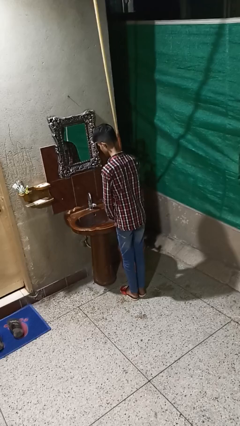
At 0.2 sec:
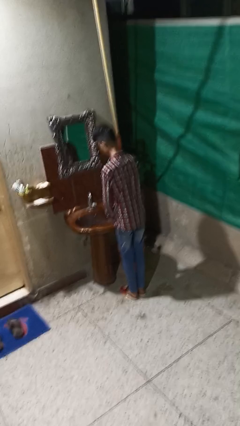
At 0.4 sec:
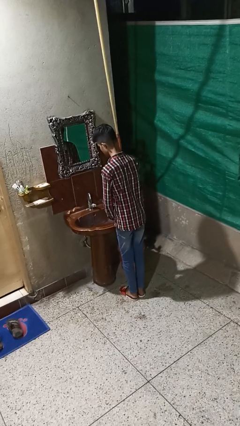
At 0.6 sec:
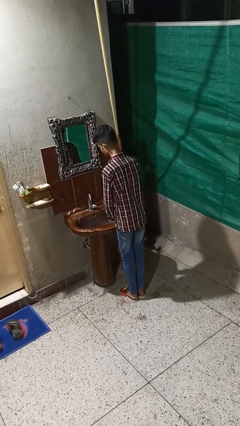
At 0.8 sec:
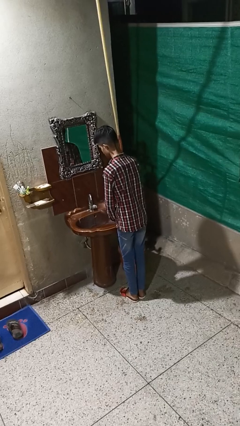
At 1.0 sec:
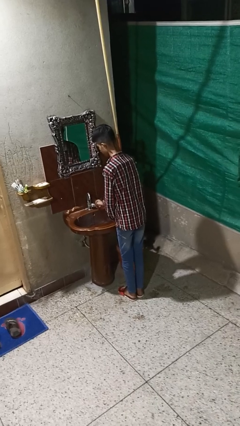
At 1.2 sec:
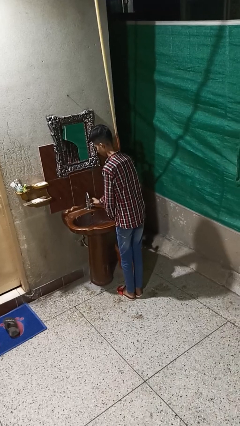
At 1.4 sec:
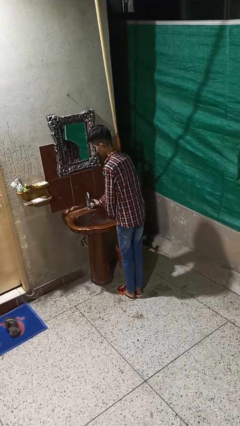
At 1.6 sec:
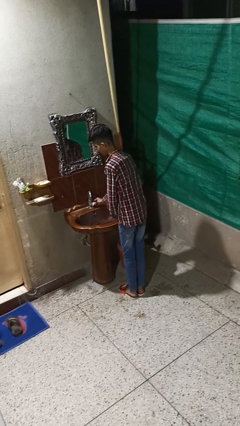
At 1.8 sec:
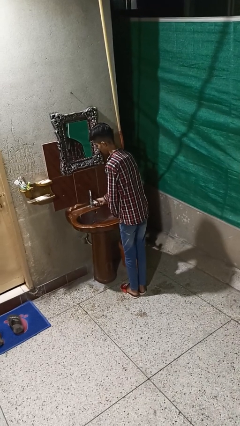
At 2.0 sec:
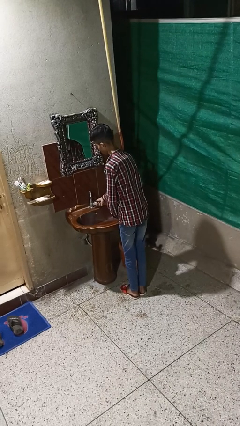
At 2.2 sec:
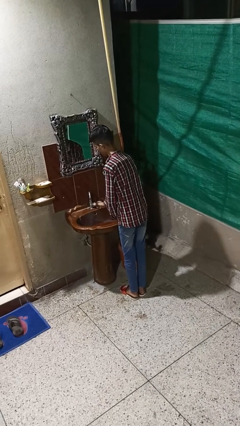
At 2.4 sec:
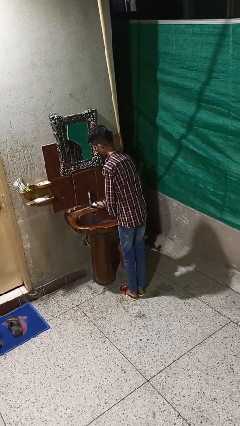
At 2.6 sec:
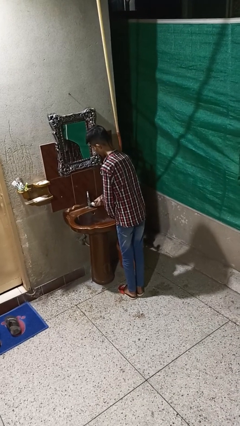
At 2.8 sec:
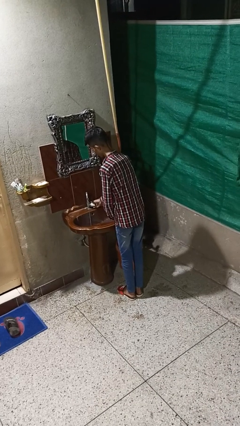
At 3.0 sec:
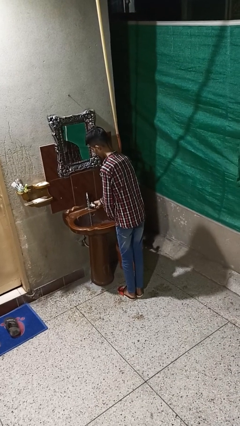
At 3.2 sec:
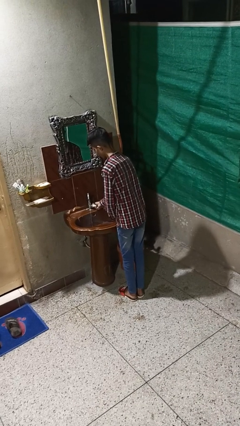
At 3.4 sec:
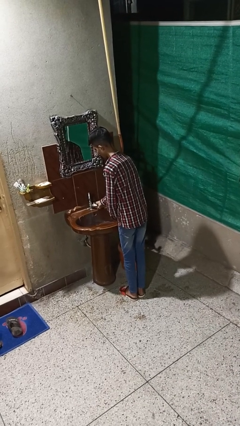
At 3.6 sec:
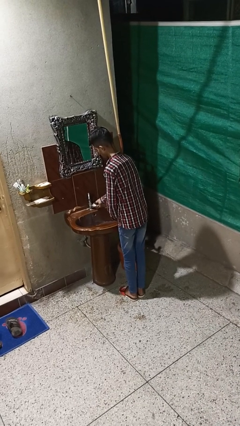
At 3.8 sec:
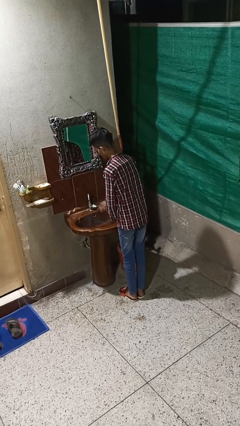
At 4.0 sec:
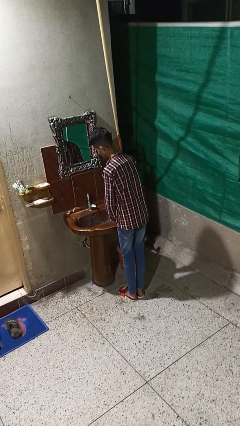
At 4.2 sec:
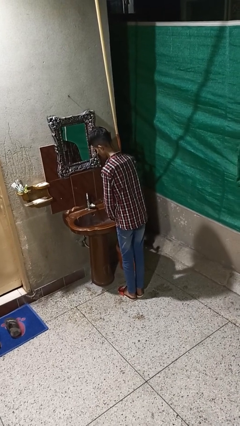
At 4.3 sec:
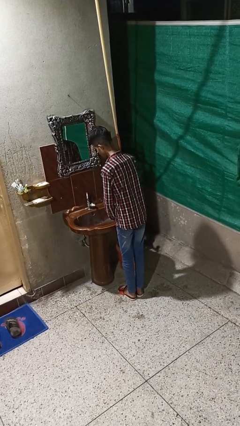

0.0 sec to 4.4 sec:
person turns off faucet

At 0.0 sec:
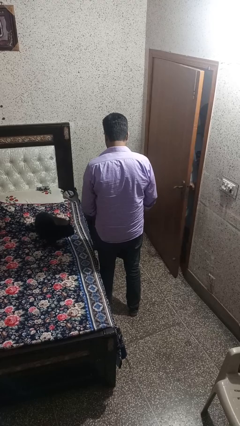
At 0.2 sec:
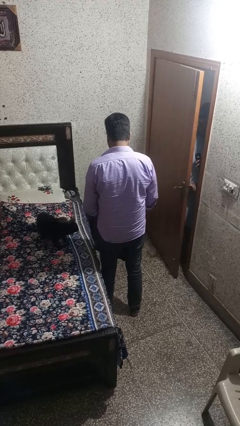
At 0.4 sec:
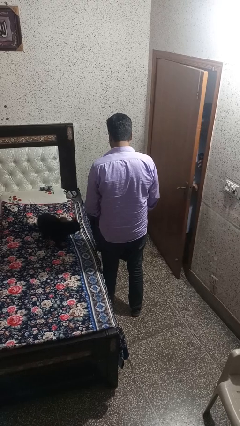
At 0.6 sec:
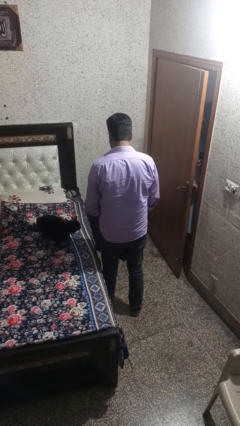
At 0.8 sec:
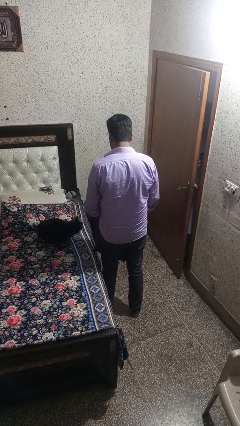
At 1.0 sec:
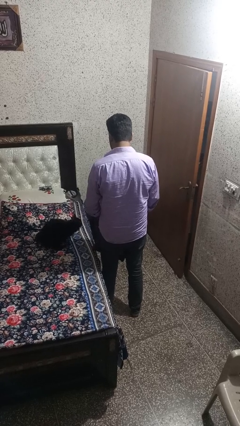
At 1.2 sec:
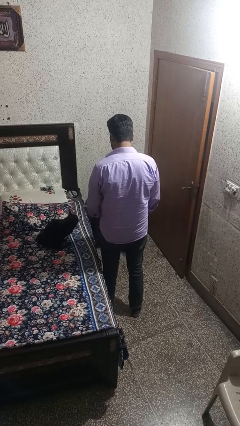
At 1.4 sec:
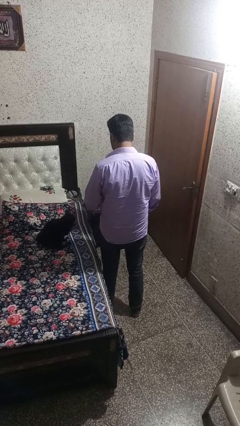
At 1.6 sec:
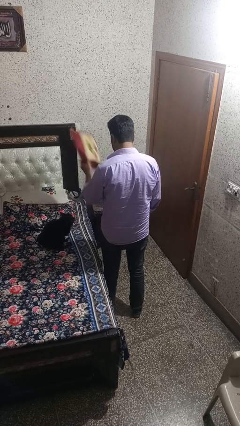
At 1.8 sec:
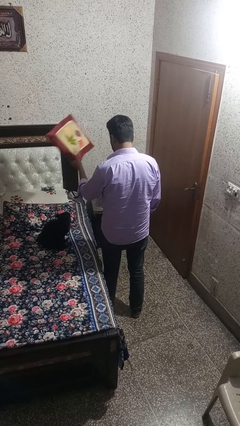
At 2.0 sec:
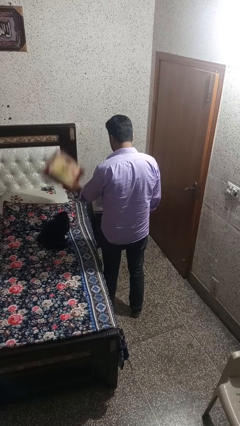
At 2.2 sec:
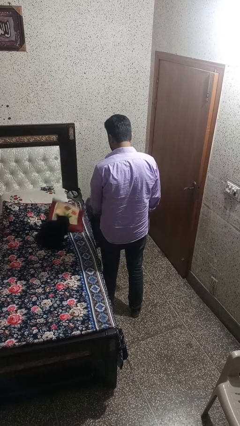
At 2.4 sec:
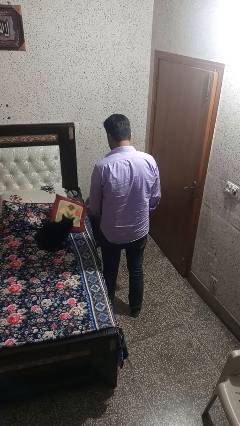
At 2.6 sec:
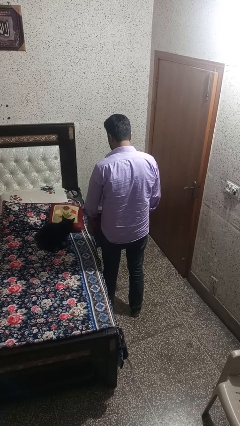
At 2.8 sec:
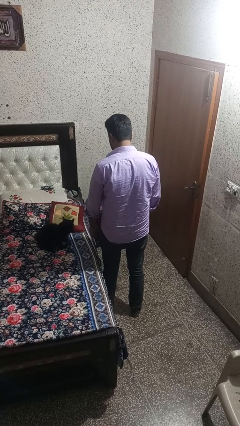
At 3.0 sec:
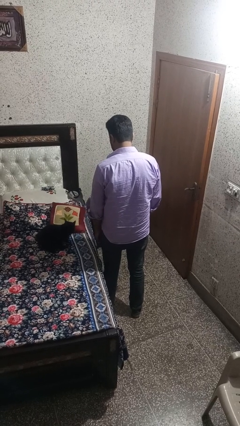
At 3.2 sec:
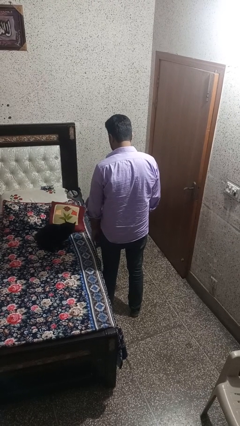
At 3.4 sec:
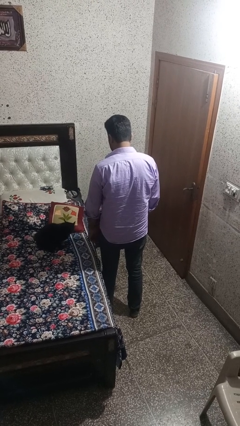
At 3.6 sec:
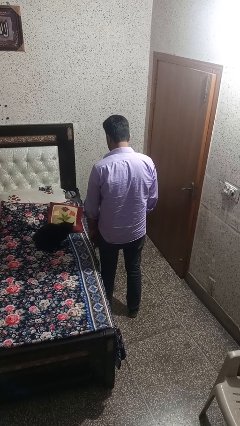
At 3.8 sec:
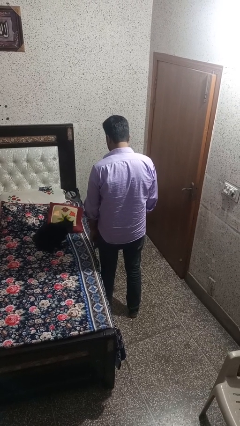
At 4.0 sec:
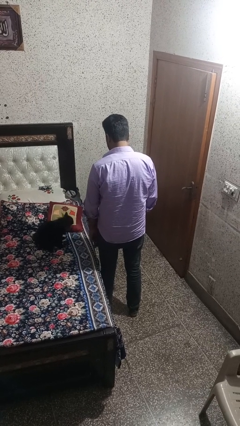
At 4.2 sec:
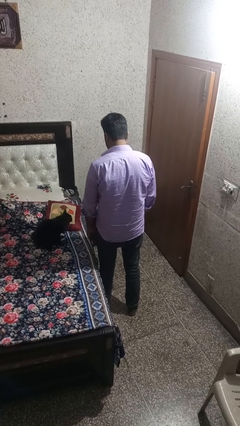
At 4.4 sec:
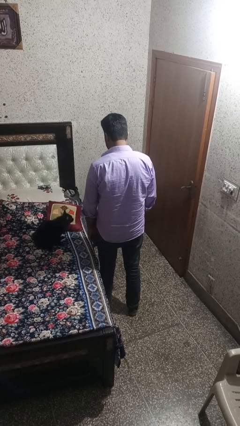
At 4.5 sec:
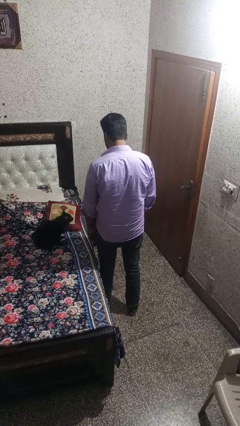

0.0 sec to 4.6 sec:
person throws object on bed

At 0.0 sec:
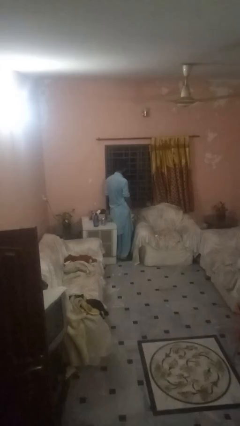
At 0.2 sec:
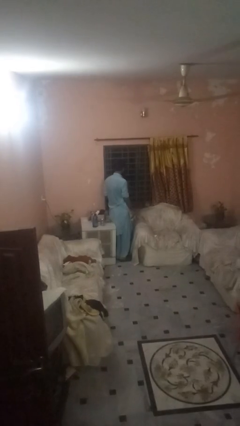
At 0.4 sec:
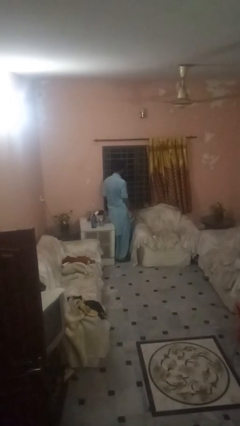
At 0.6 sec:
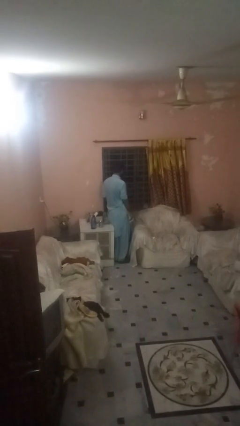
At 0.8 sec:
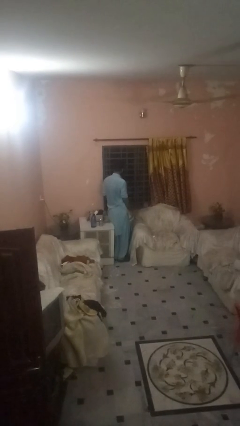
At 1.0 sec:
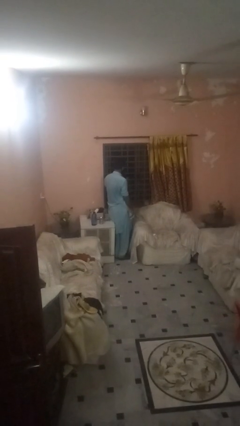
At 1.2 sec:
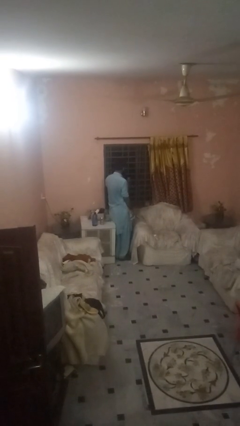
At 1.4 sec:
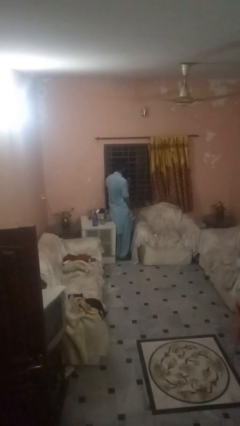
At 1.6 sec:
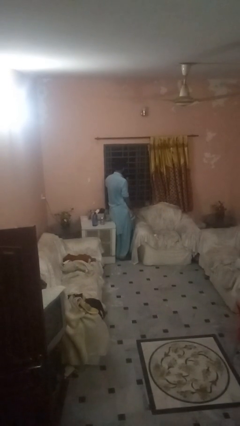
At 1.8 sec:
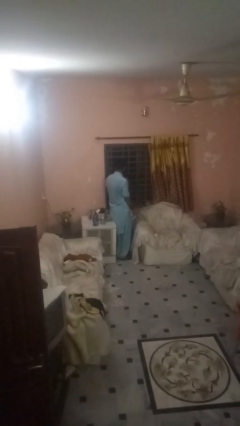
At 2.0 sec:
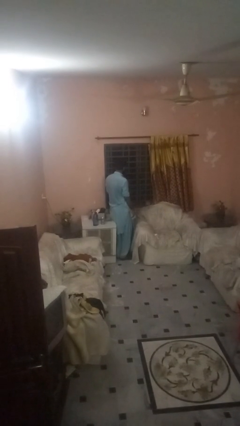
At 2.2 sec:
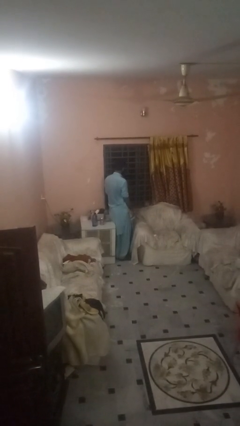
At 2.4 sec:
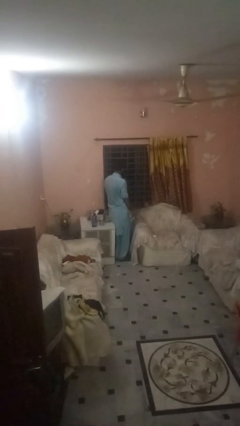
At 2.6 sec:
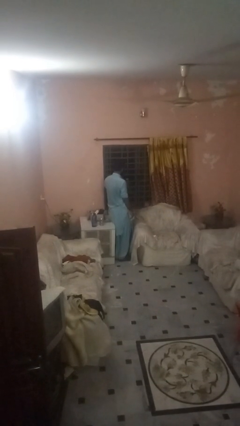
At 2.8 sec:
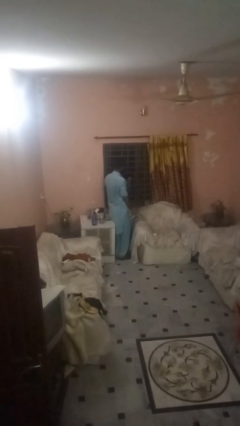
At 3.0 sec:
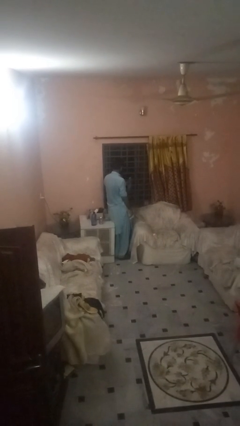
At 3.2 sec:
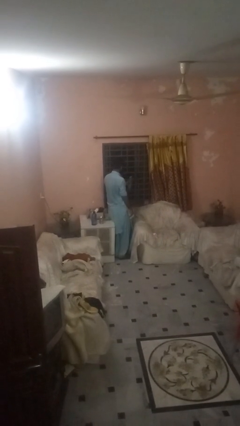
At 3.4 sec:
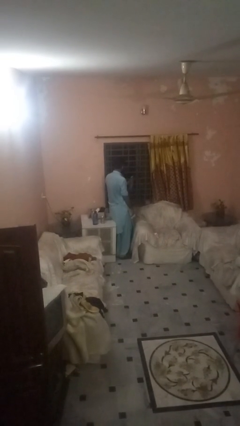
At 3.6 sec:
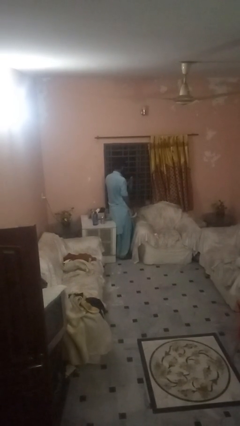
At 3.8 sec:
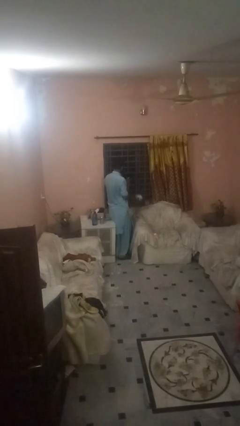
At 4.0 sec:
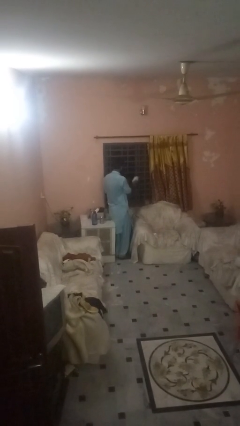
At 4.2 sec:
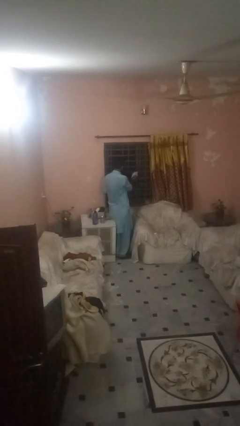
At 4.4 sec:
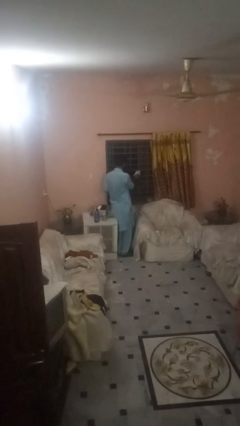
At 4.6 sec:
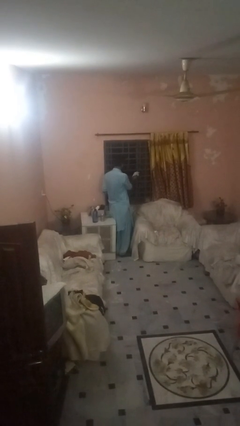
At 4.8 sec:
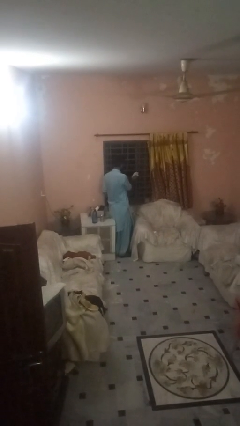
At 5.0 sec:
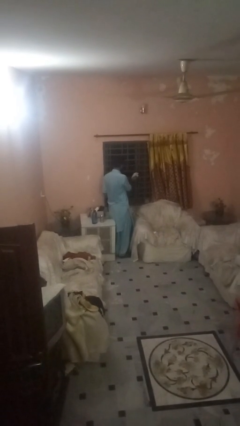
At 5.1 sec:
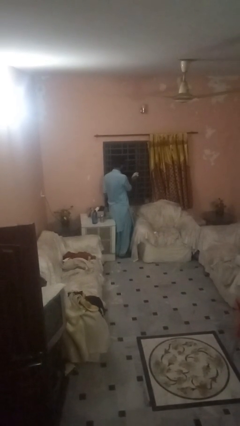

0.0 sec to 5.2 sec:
person sprays from bottle

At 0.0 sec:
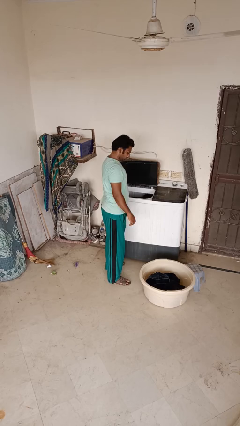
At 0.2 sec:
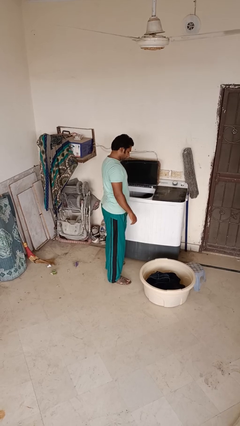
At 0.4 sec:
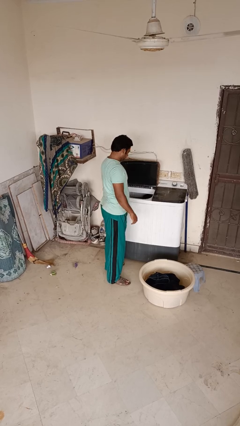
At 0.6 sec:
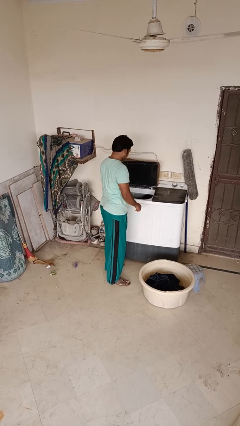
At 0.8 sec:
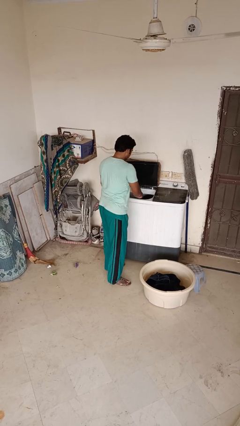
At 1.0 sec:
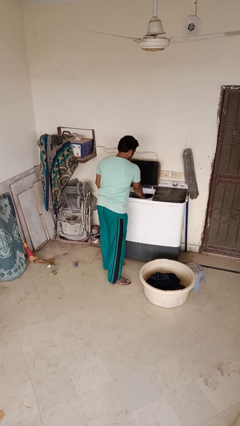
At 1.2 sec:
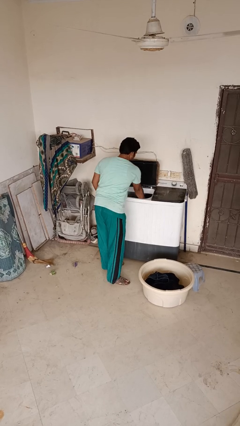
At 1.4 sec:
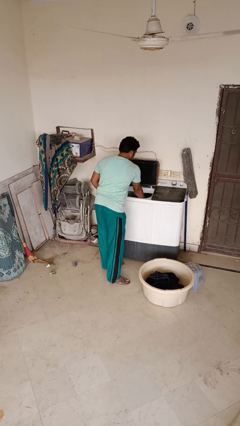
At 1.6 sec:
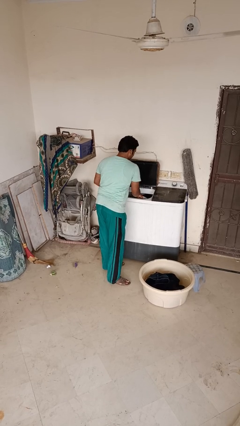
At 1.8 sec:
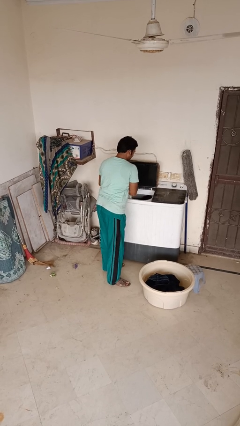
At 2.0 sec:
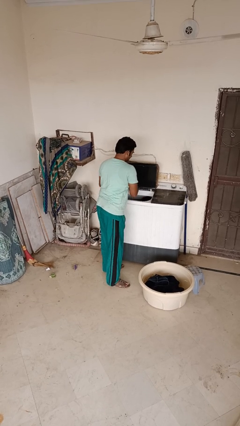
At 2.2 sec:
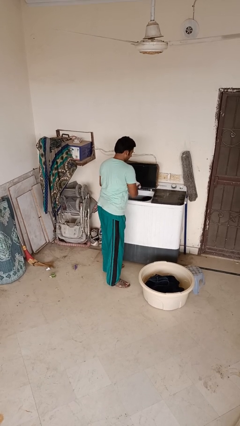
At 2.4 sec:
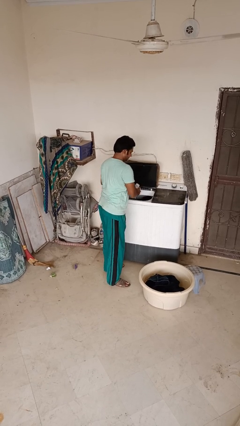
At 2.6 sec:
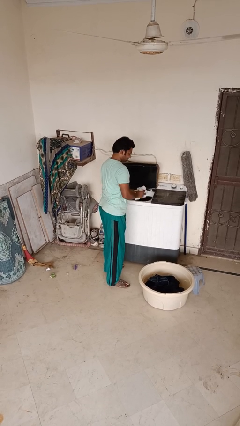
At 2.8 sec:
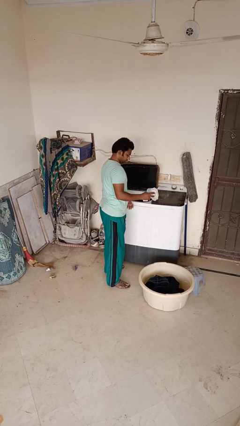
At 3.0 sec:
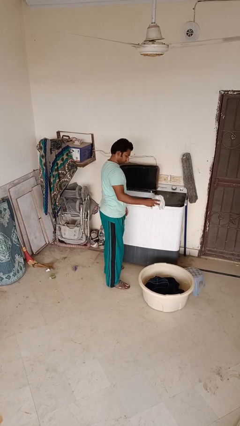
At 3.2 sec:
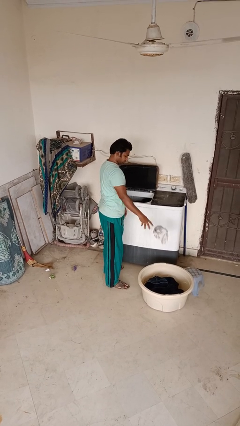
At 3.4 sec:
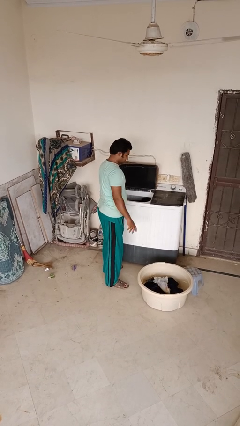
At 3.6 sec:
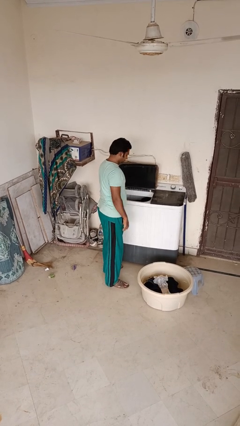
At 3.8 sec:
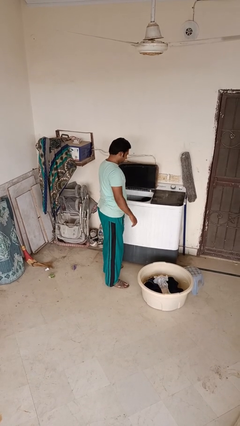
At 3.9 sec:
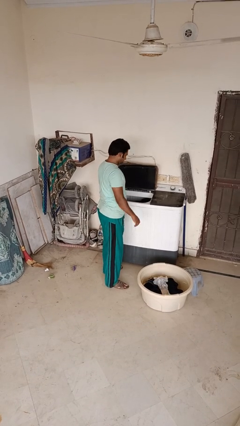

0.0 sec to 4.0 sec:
person loads clotheswasher
